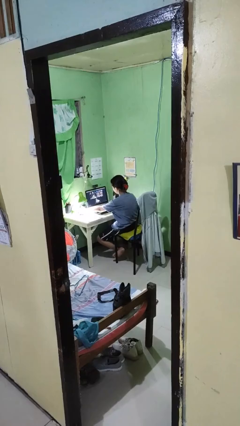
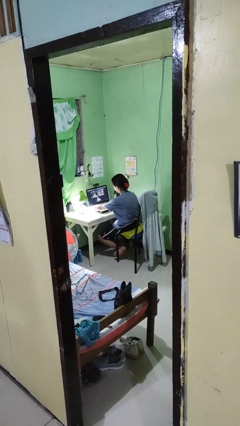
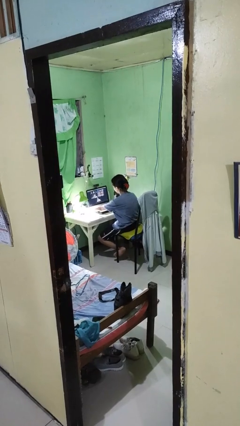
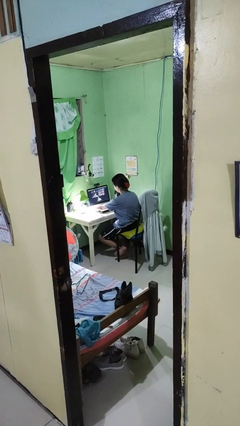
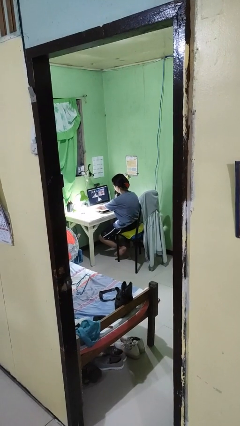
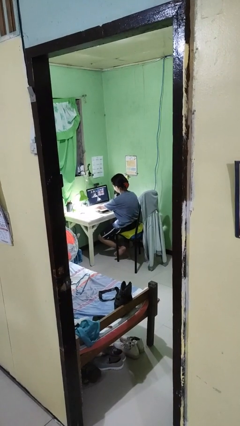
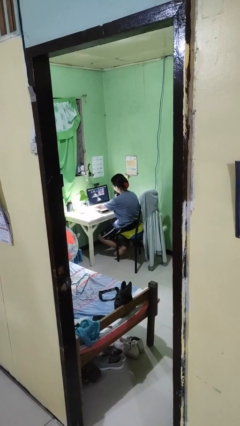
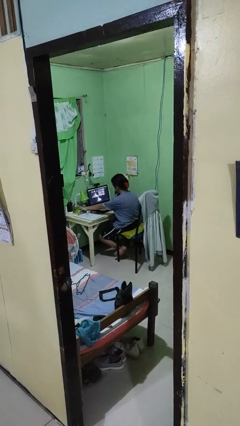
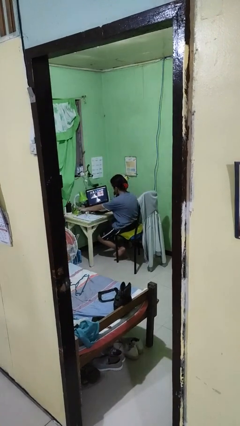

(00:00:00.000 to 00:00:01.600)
person turns off lamp

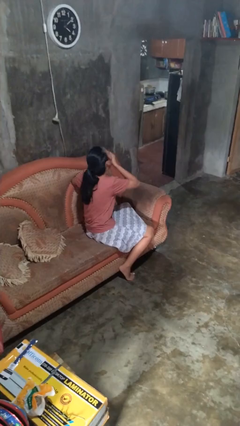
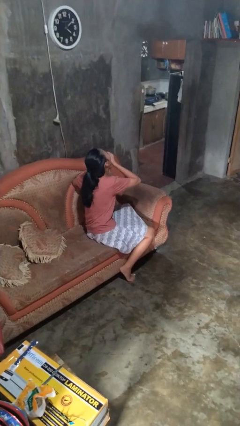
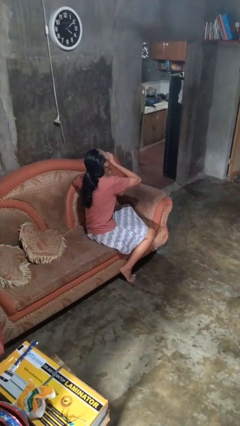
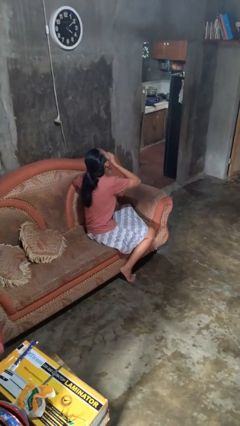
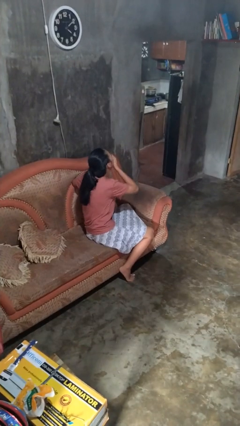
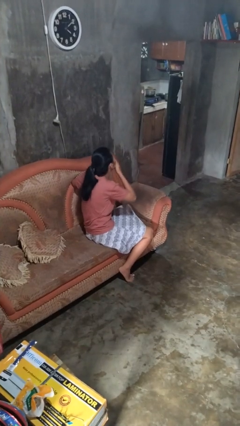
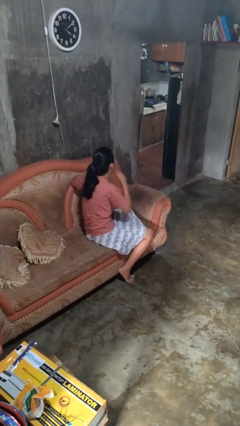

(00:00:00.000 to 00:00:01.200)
person yawns

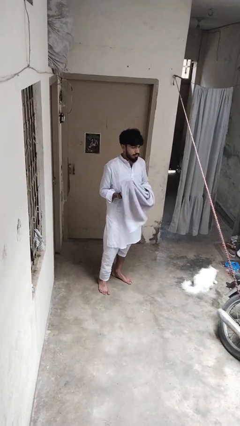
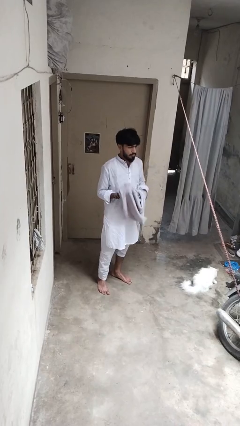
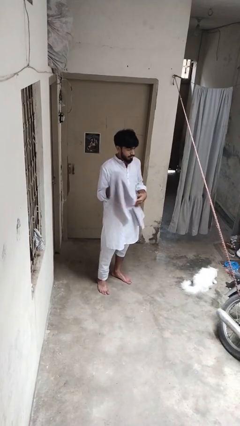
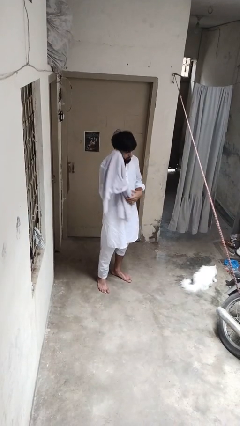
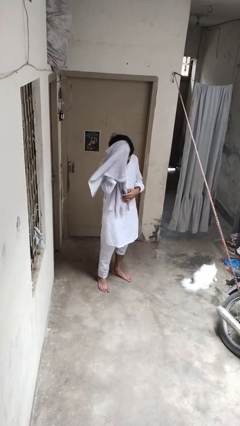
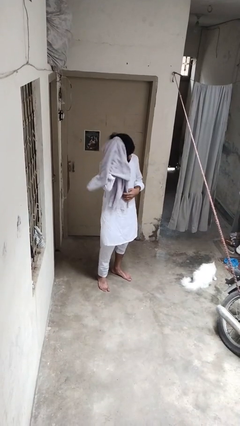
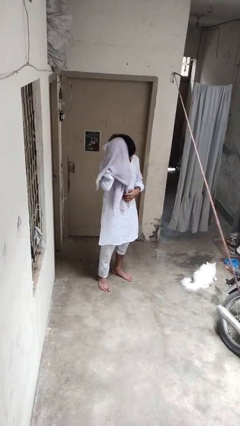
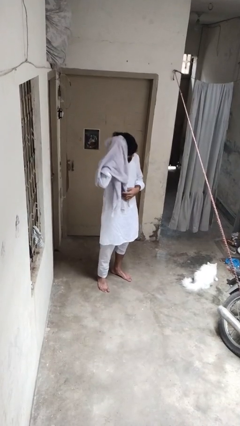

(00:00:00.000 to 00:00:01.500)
person dries hair with towel

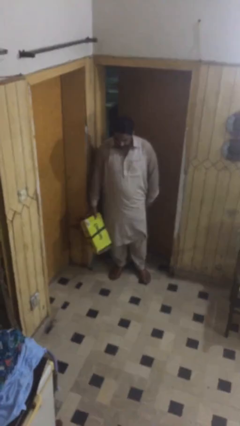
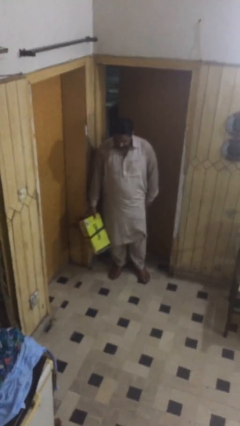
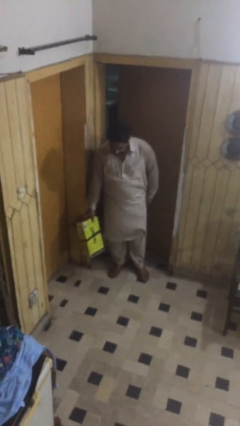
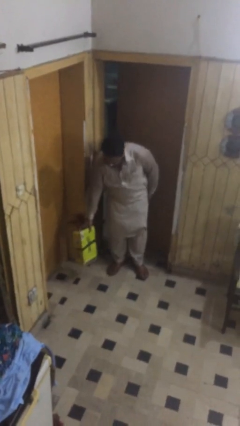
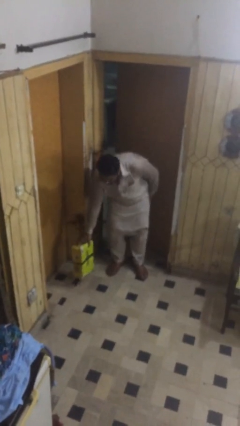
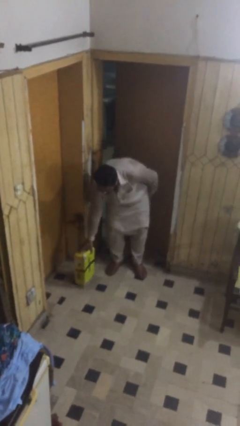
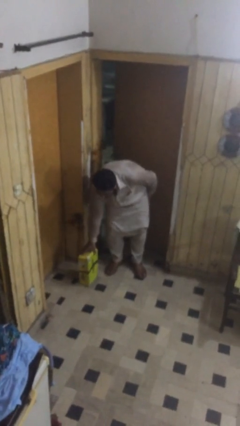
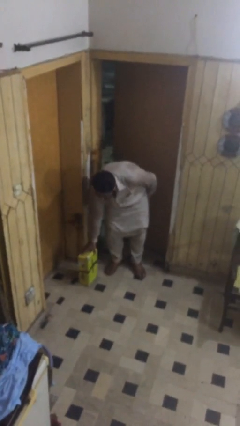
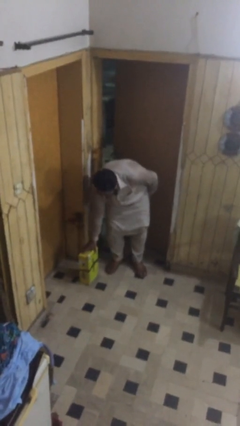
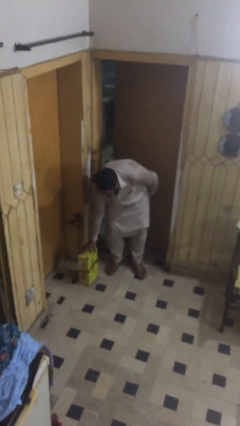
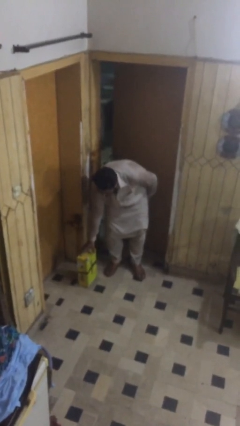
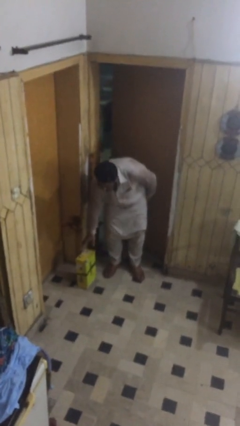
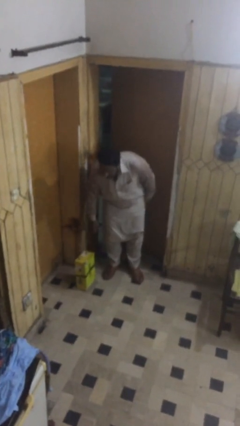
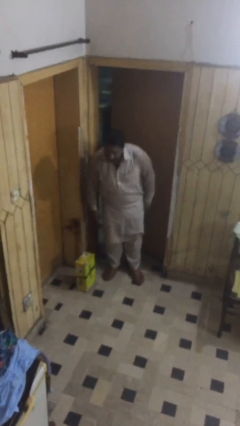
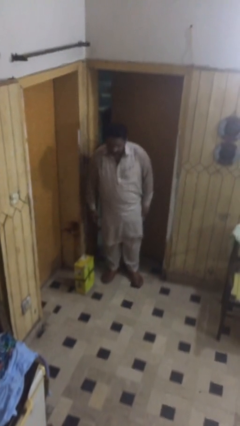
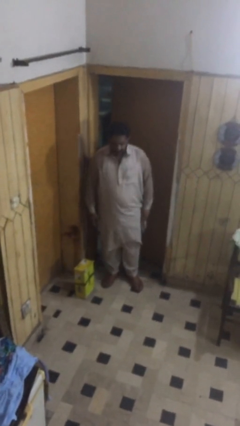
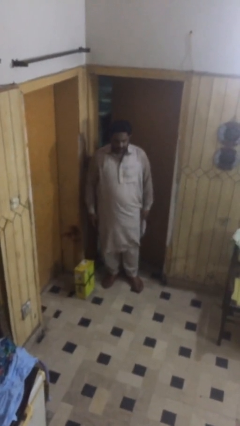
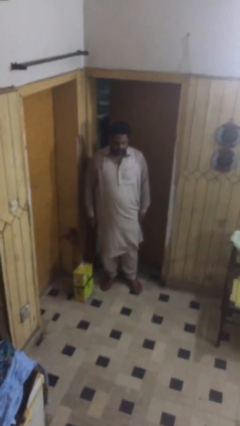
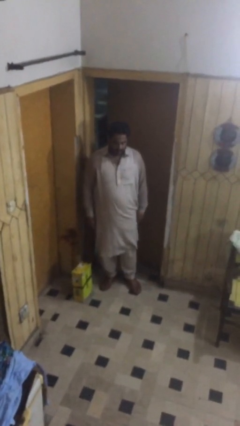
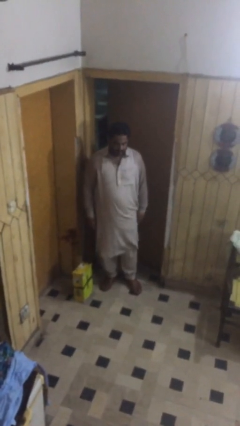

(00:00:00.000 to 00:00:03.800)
person puts down object on floor

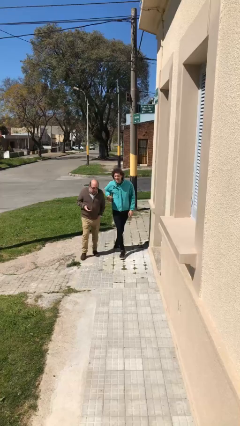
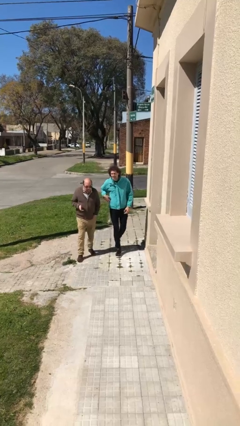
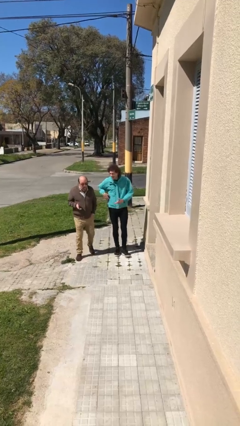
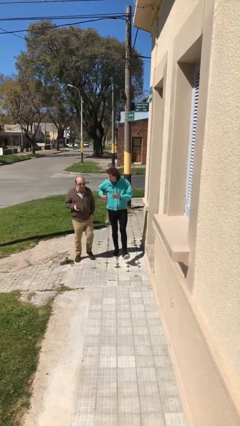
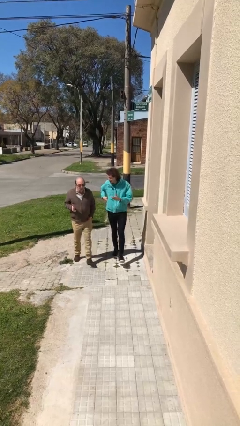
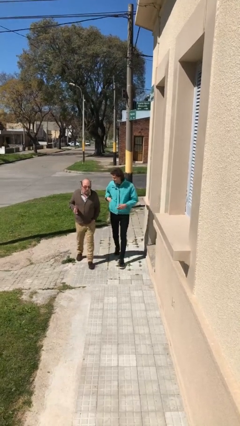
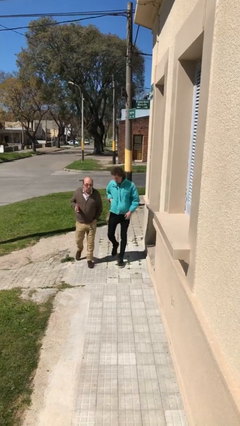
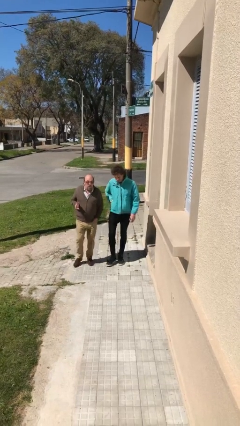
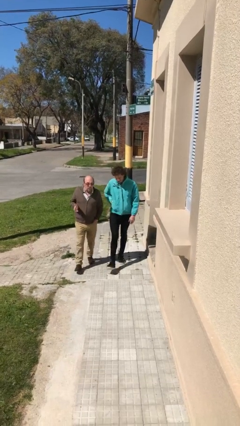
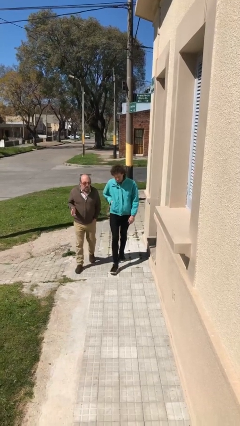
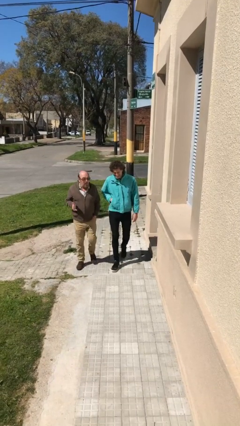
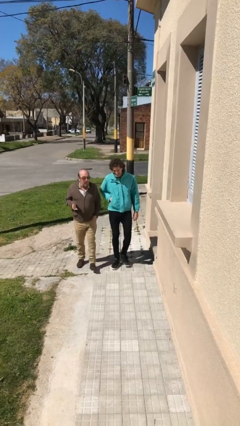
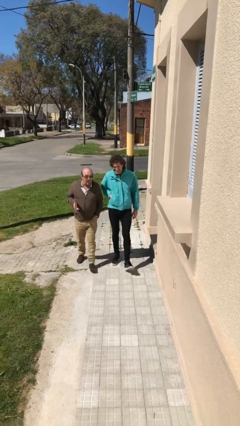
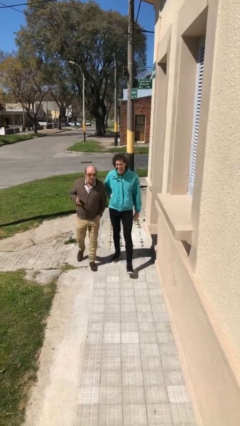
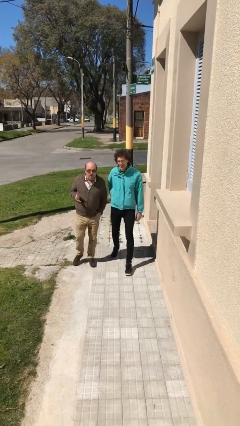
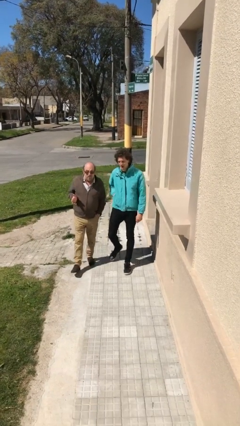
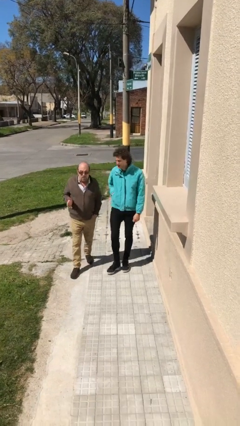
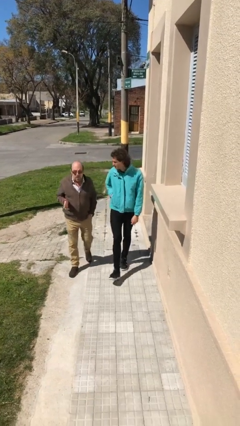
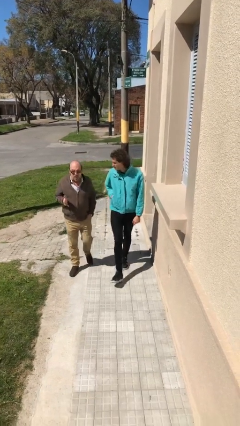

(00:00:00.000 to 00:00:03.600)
person talks to person

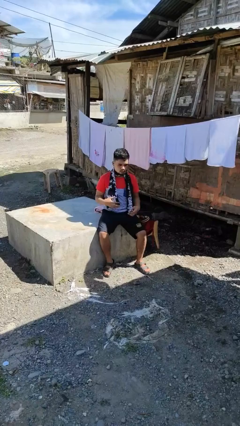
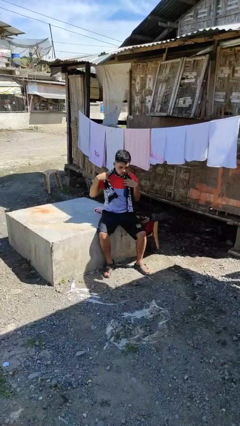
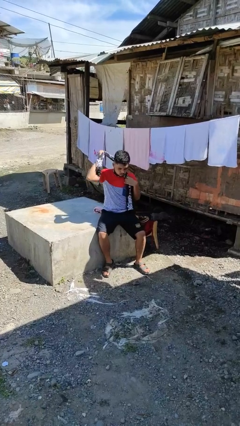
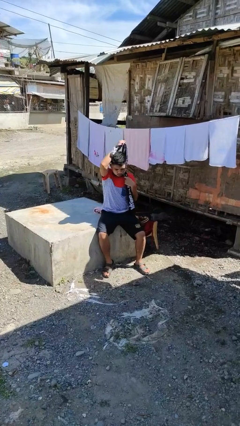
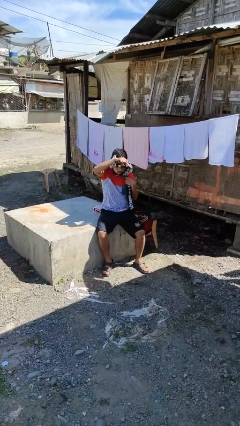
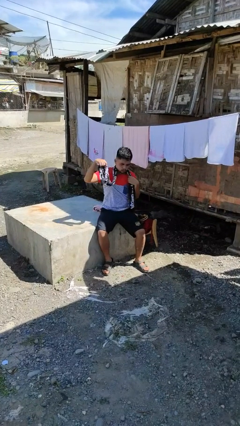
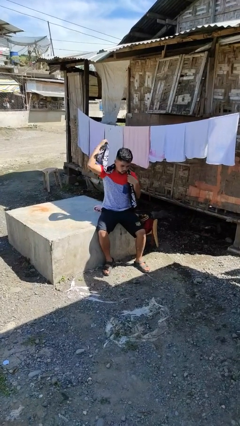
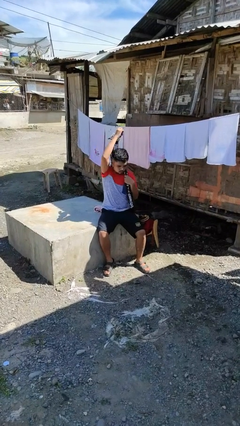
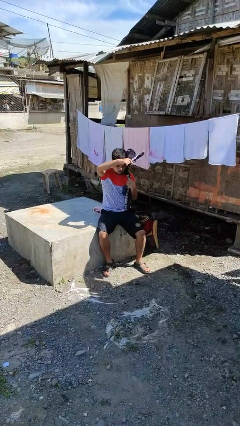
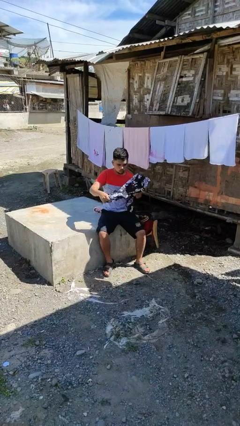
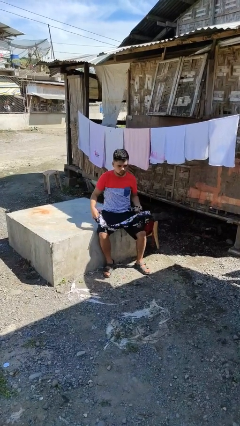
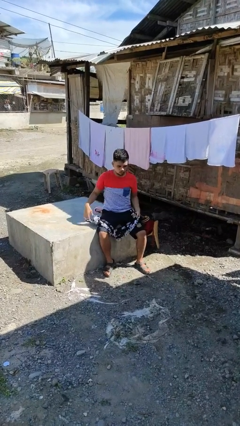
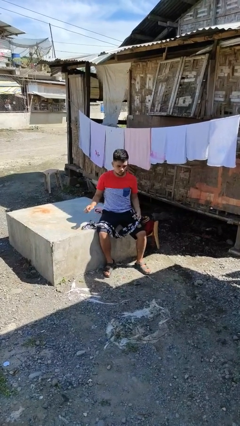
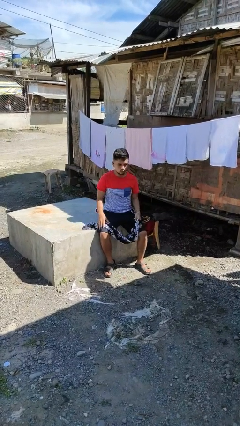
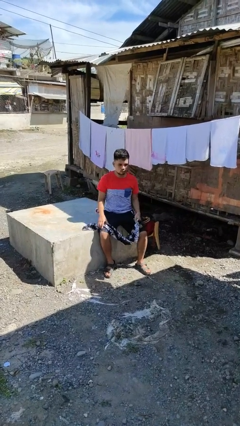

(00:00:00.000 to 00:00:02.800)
person takes off scarf

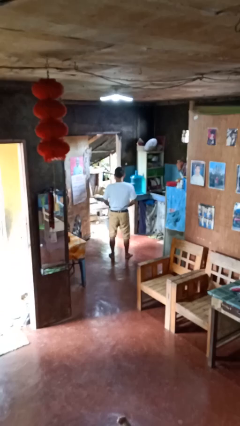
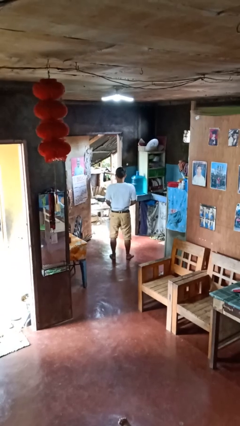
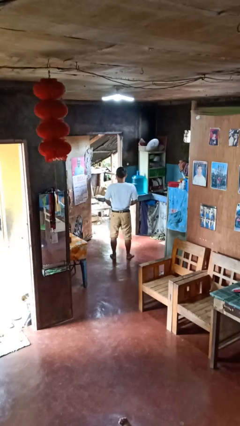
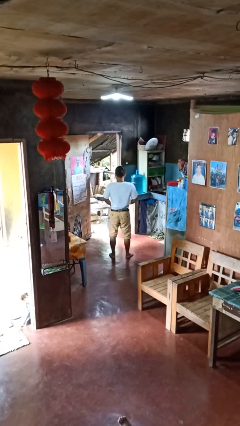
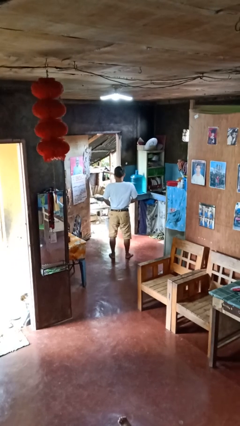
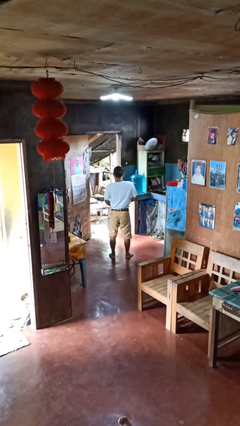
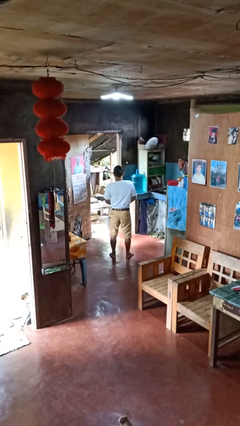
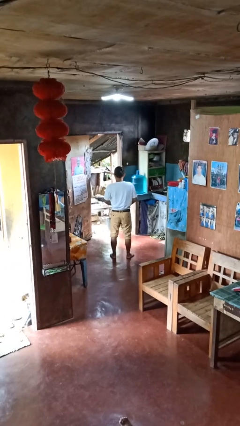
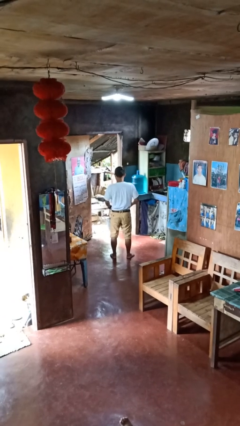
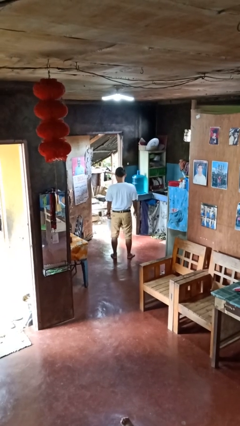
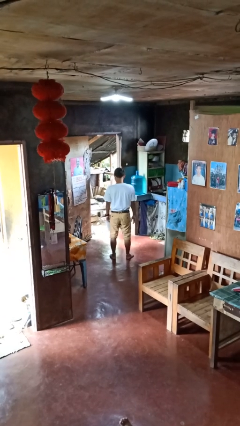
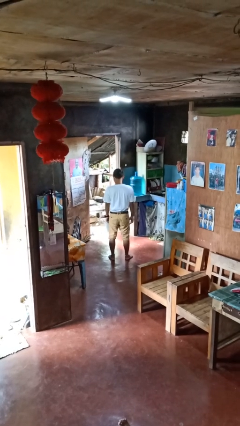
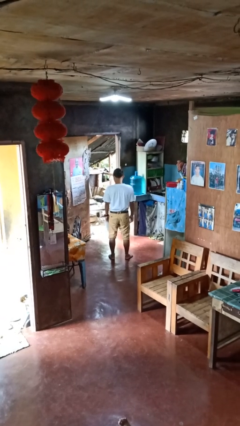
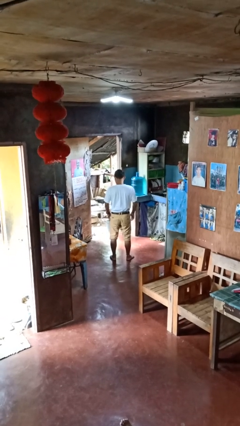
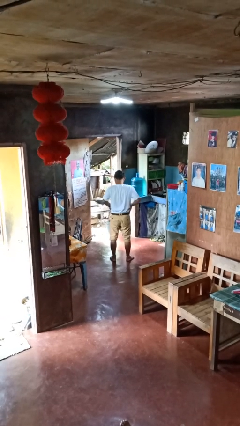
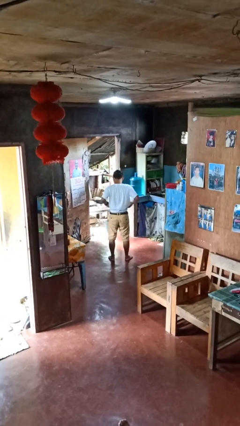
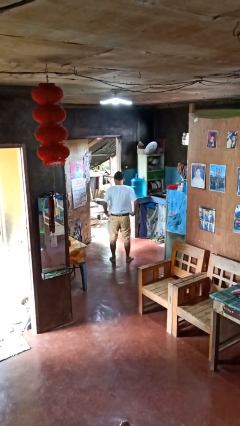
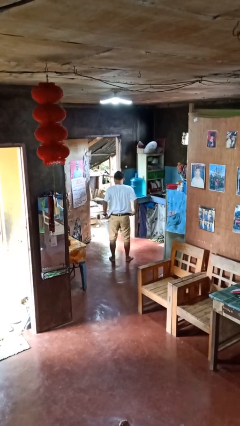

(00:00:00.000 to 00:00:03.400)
person tucks in shirt
